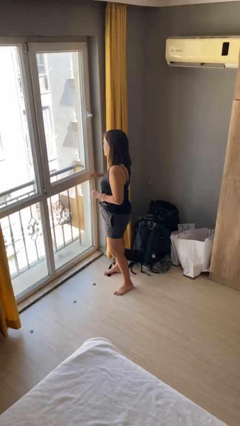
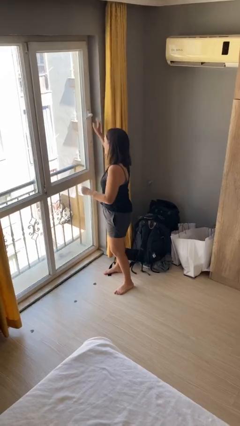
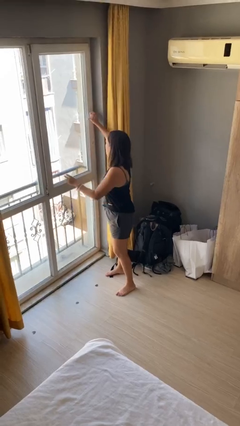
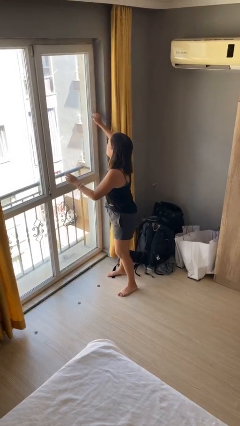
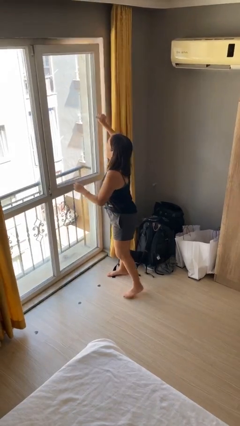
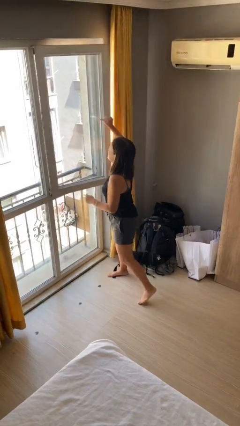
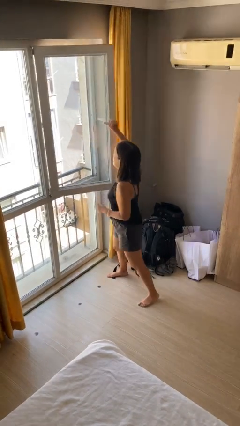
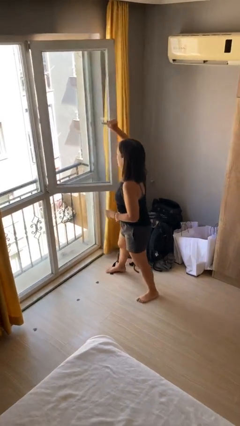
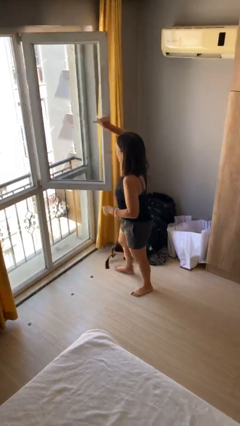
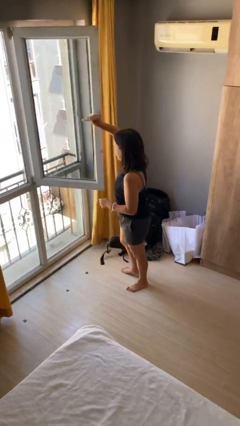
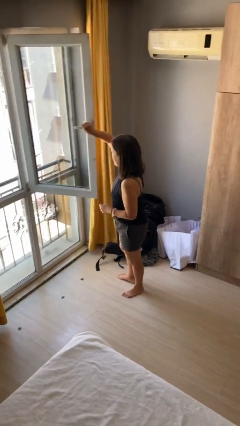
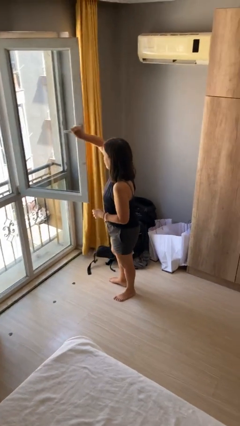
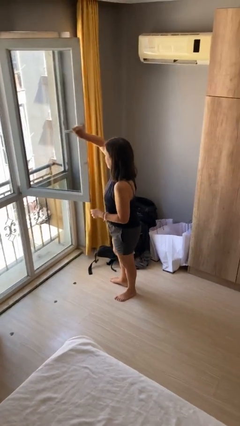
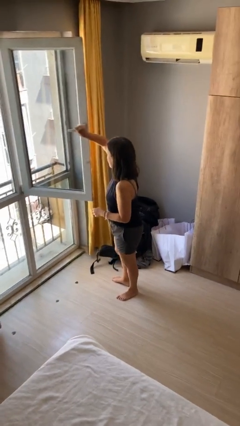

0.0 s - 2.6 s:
person opens home window

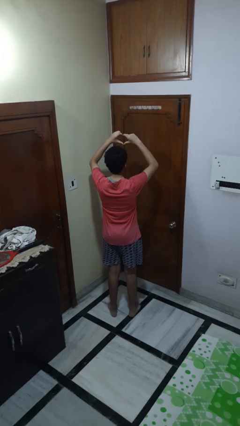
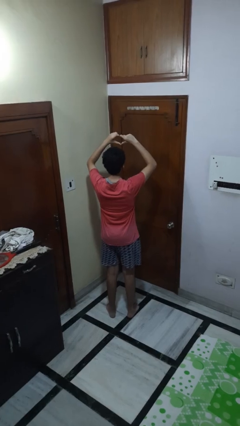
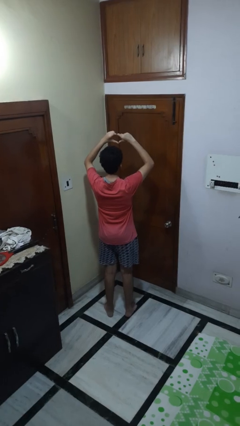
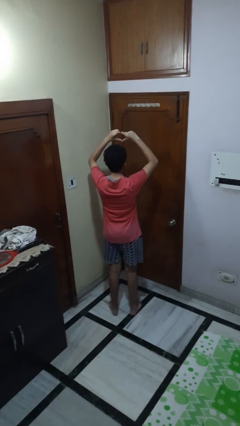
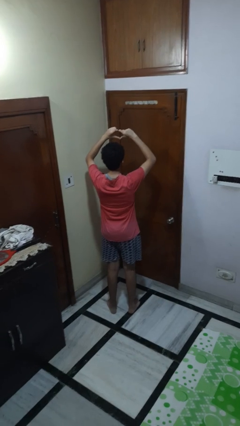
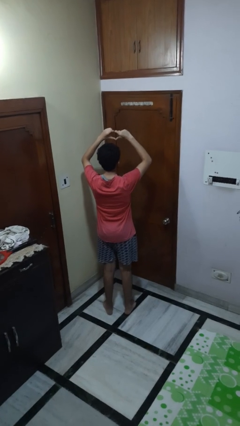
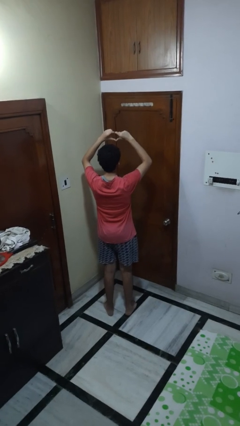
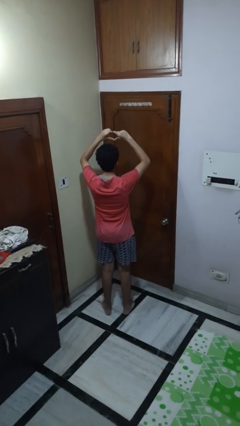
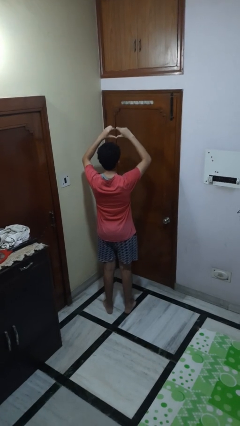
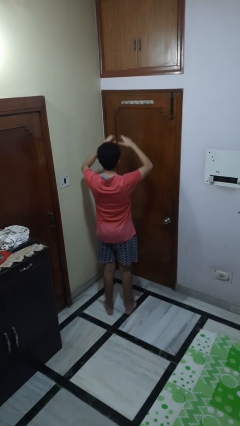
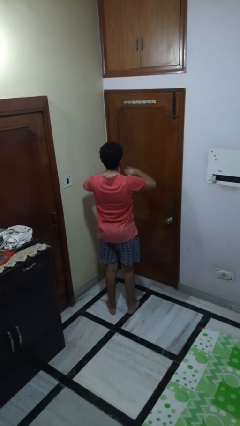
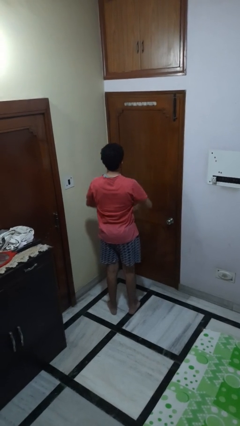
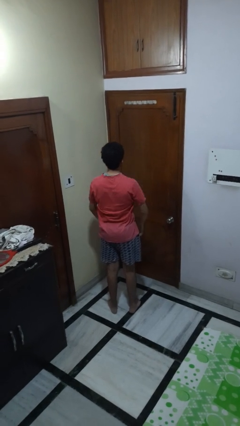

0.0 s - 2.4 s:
person gestures heart

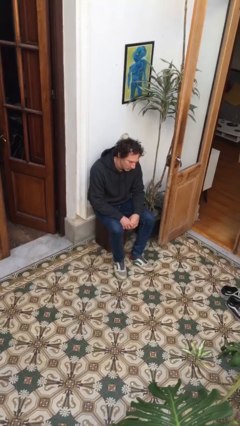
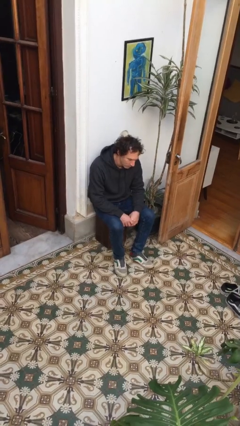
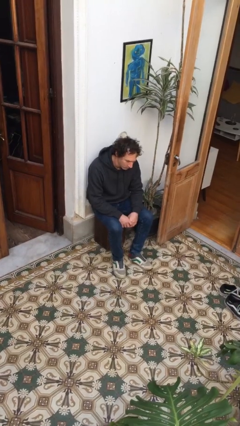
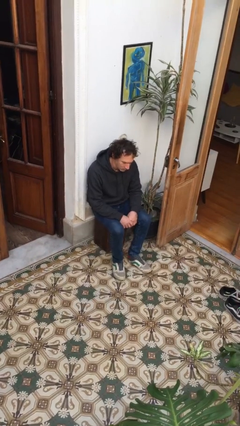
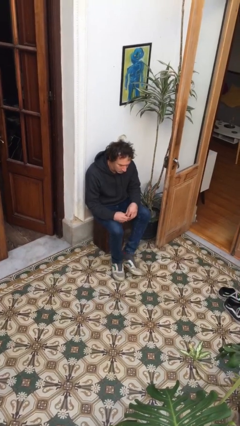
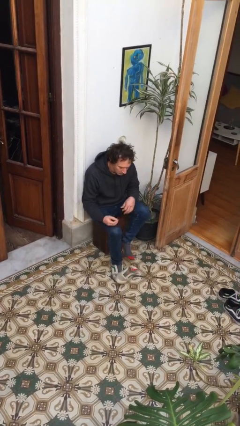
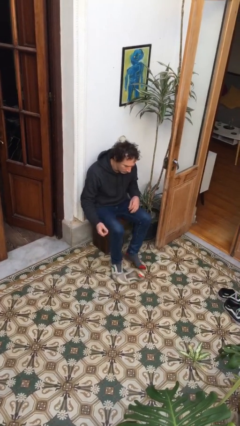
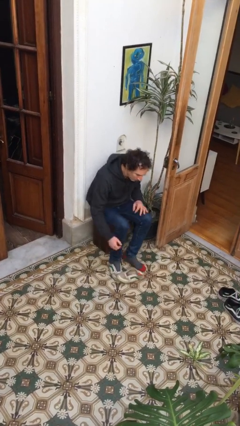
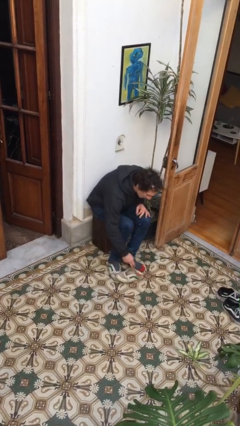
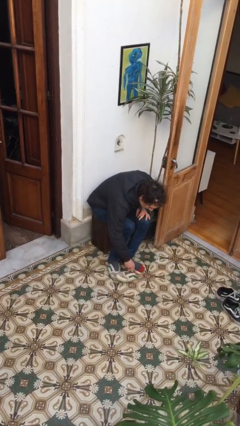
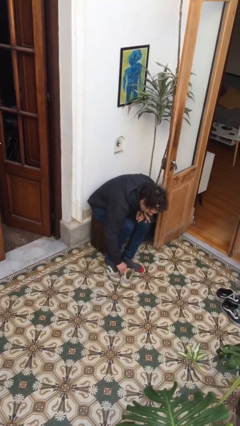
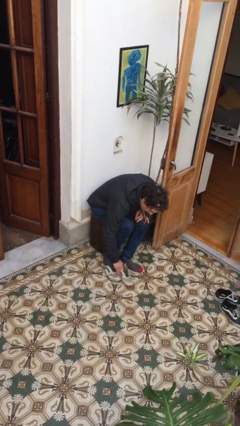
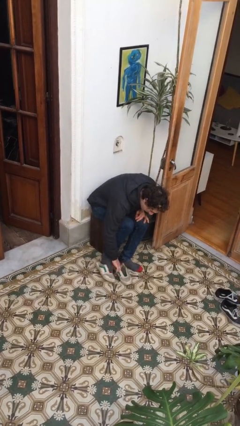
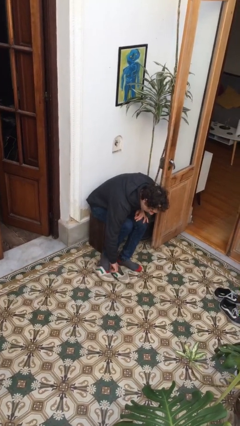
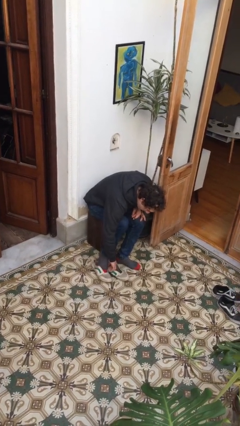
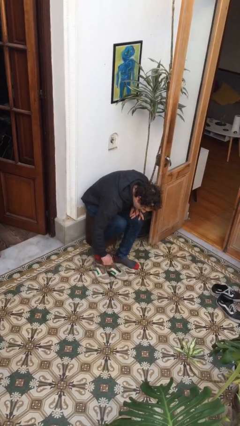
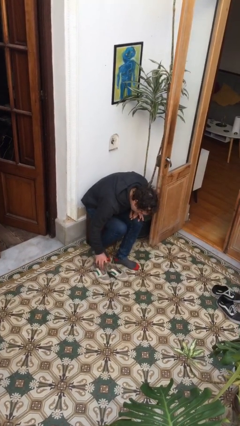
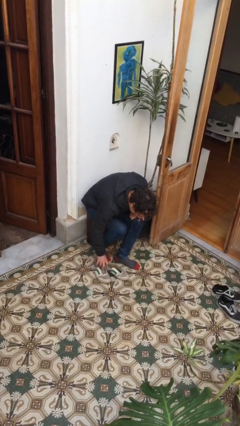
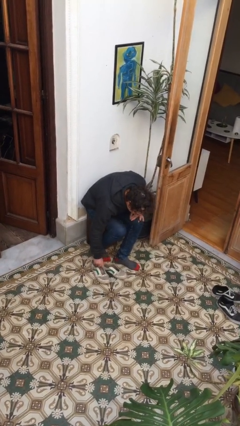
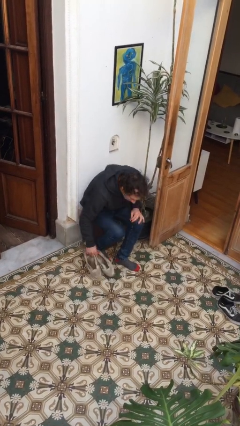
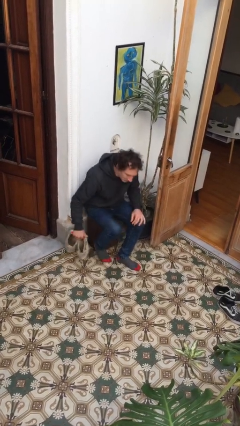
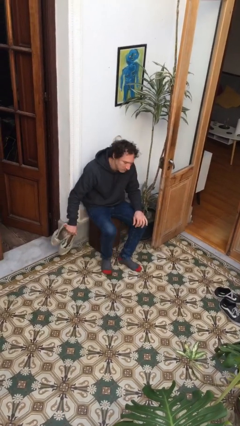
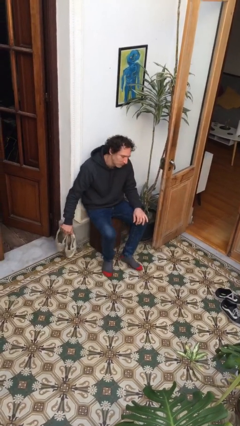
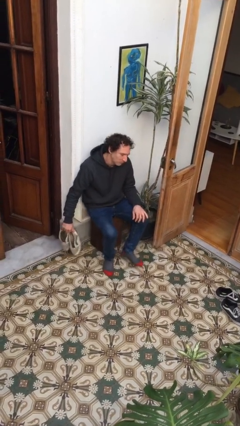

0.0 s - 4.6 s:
person takes off shoes

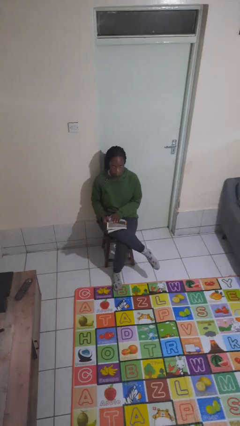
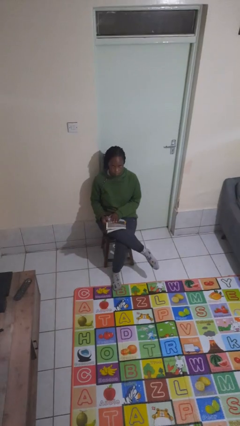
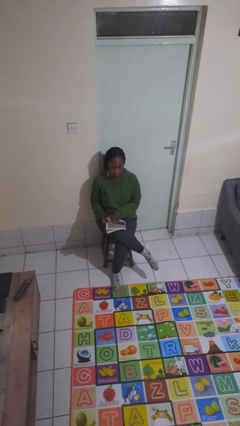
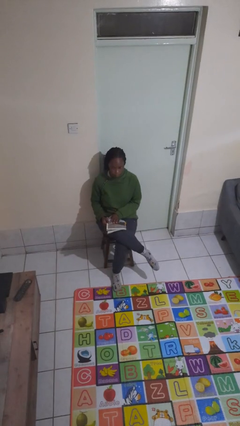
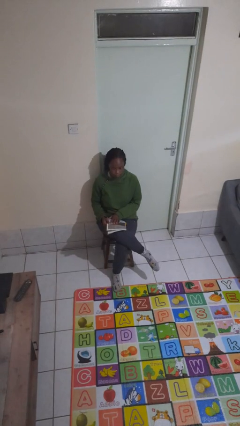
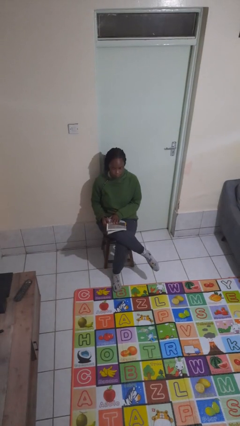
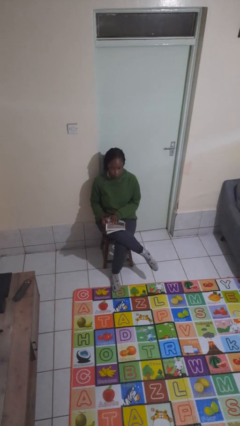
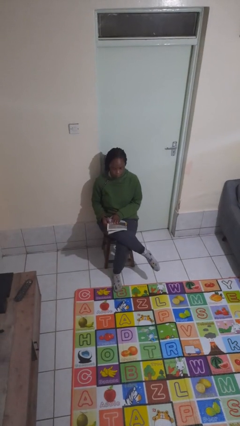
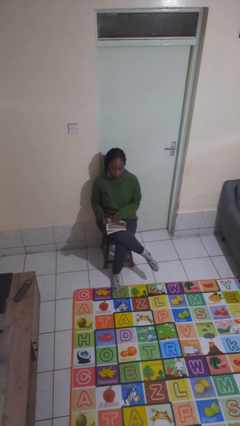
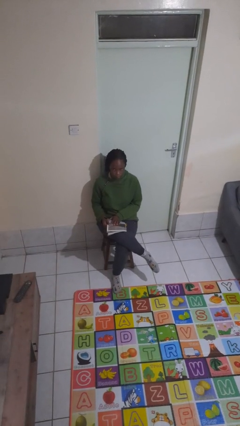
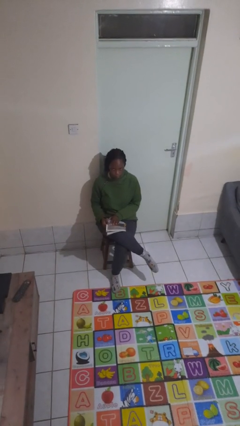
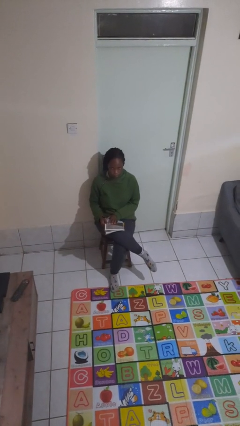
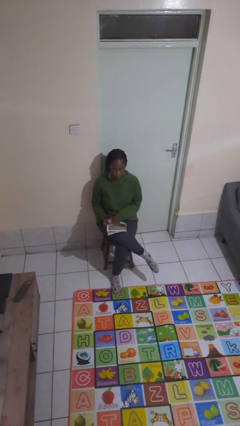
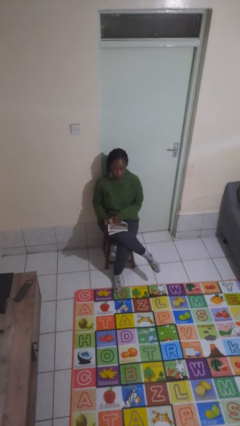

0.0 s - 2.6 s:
person reads magazine

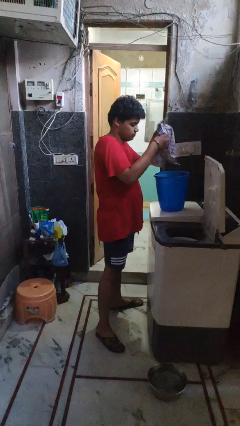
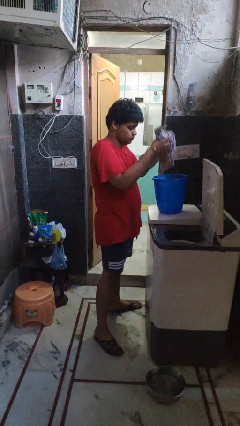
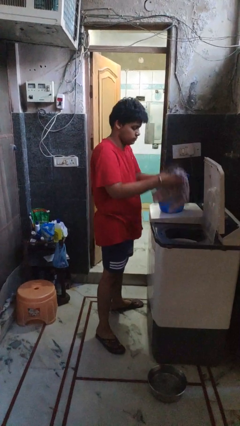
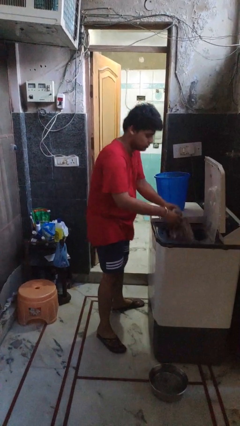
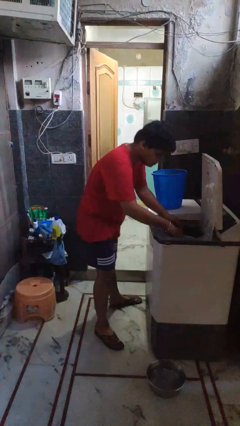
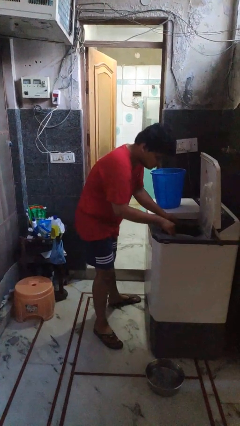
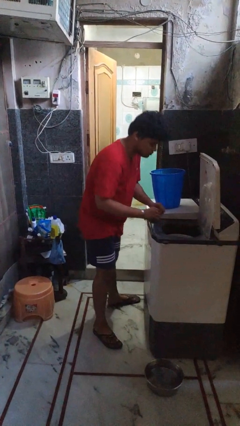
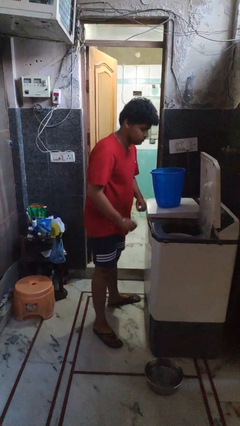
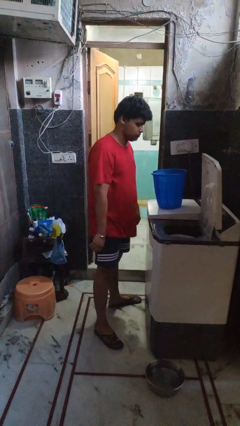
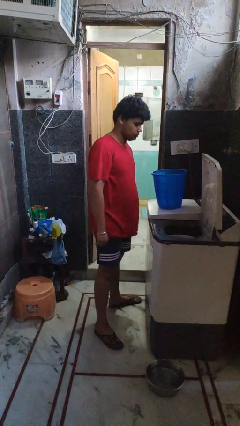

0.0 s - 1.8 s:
person loads dryer

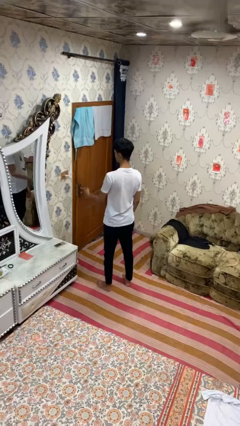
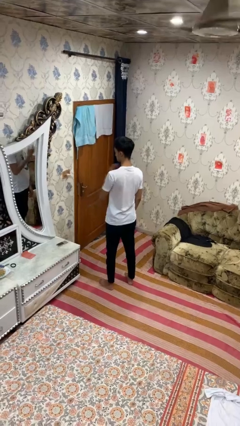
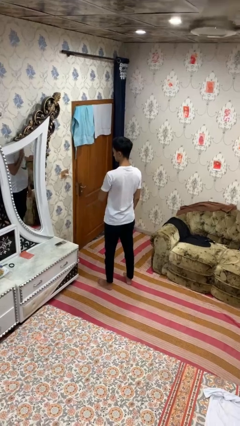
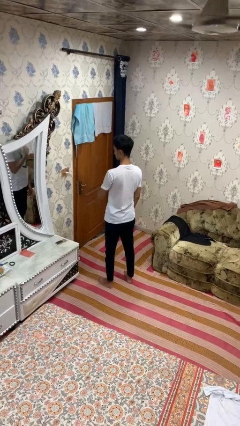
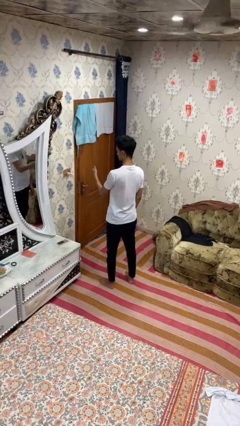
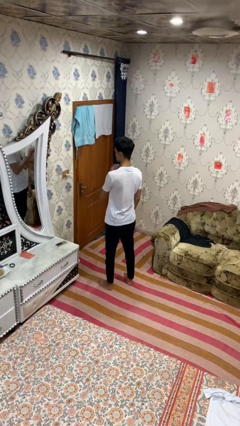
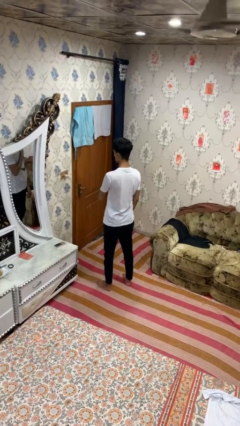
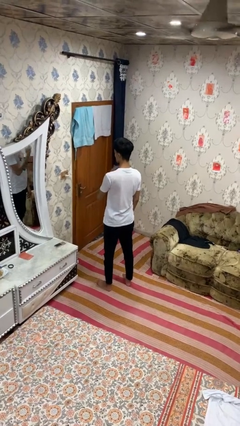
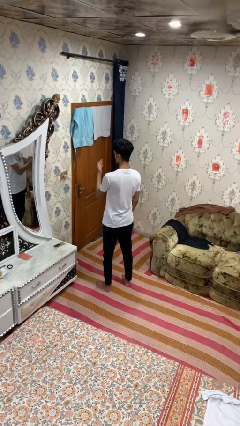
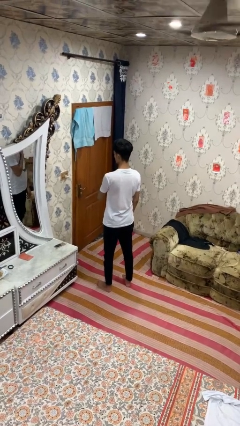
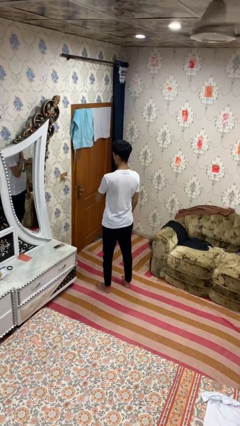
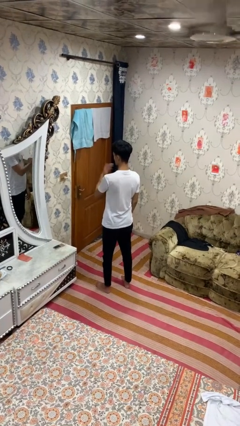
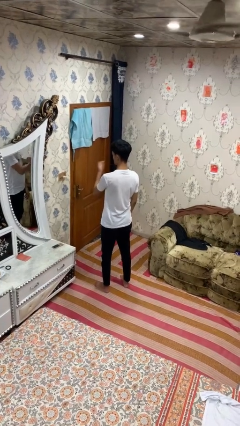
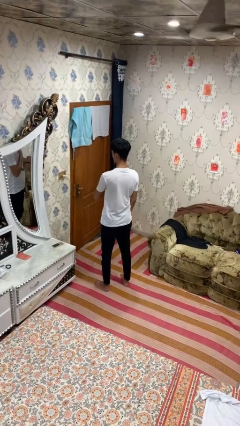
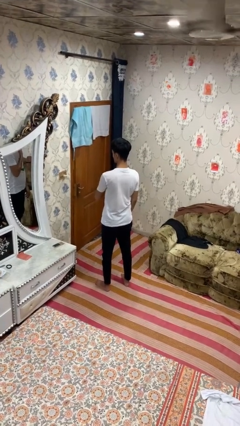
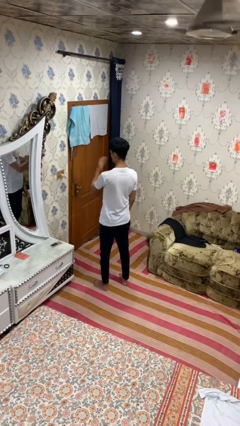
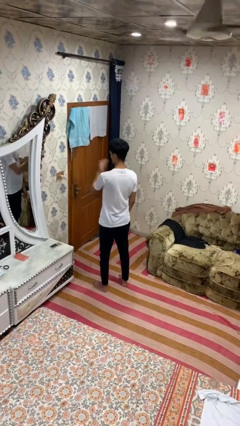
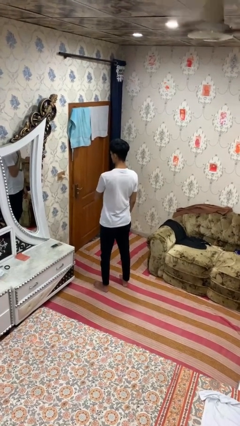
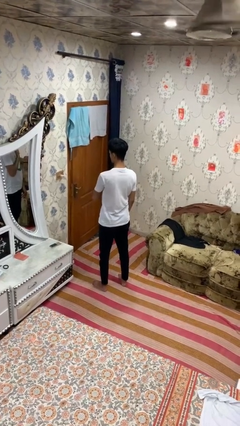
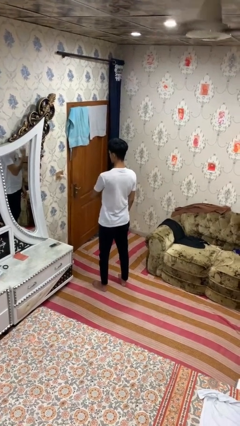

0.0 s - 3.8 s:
person drums on chest
